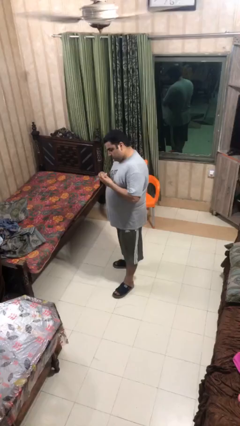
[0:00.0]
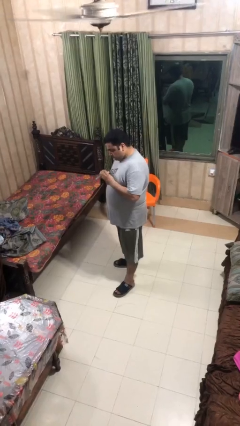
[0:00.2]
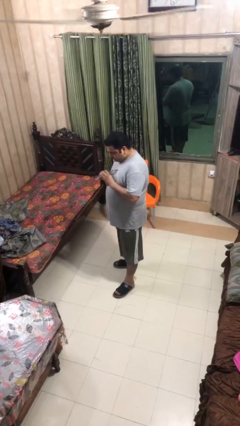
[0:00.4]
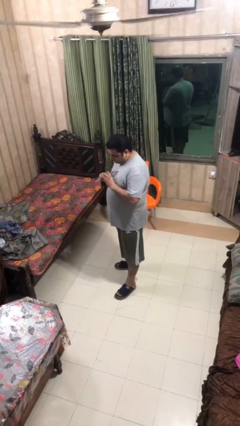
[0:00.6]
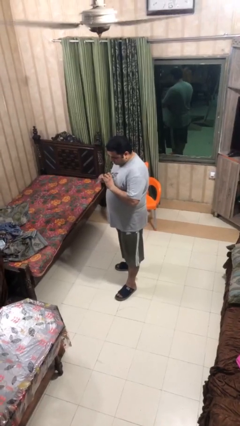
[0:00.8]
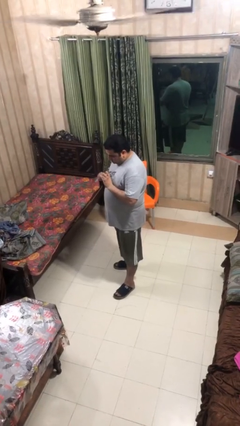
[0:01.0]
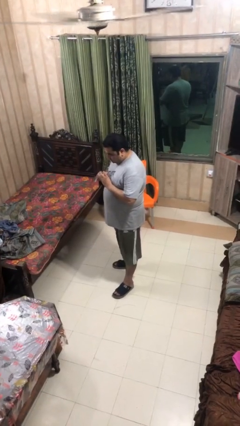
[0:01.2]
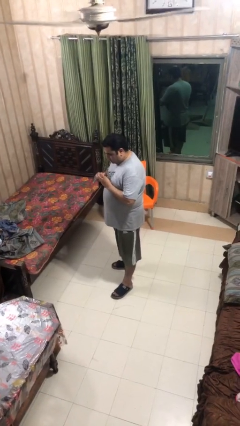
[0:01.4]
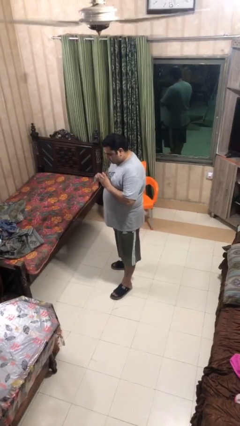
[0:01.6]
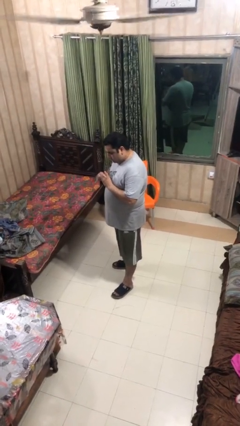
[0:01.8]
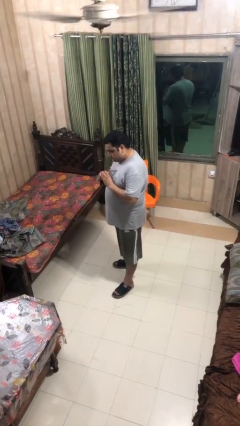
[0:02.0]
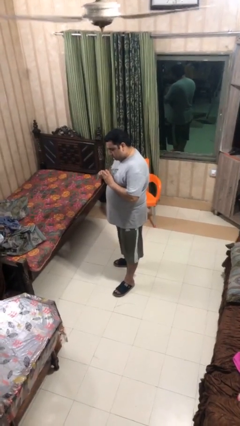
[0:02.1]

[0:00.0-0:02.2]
person files fingernails

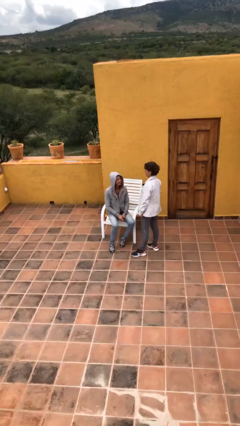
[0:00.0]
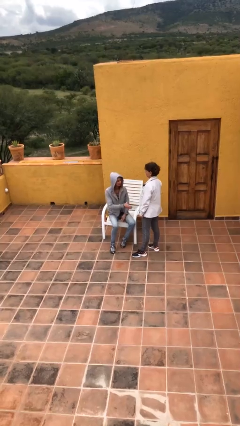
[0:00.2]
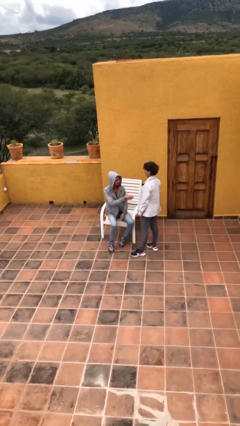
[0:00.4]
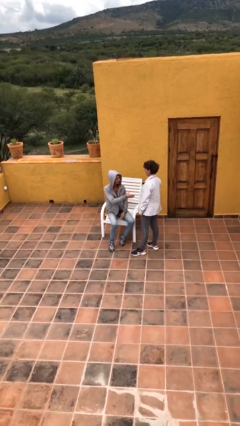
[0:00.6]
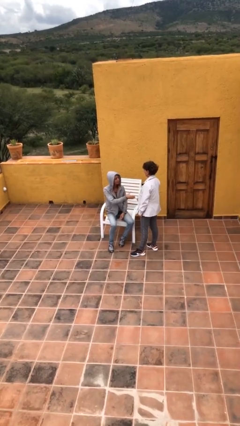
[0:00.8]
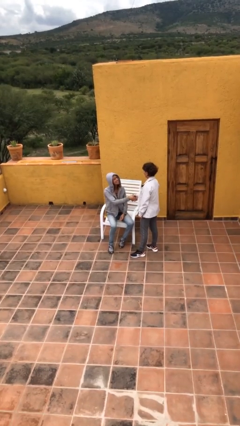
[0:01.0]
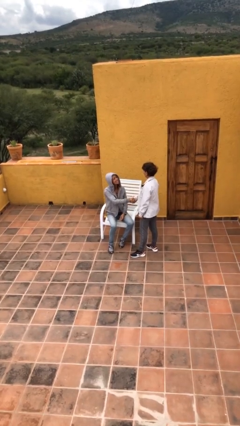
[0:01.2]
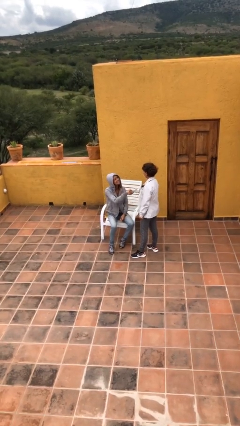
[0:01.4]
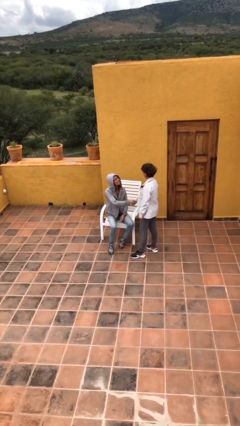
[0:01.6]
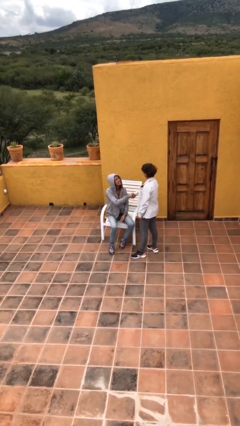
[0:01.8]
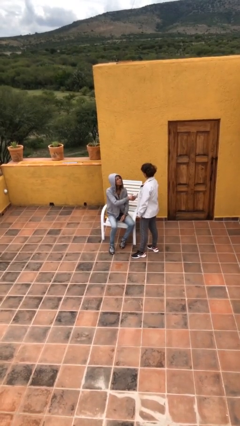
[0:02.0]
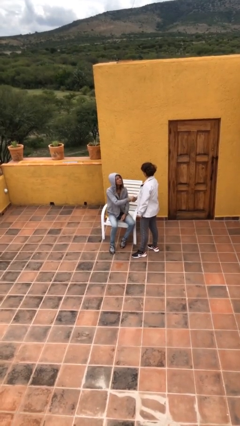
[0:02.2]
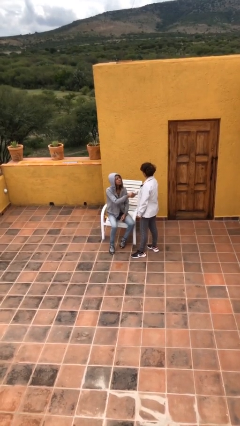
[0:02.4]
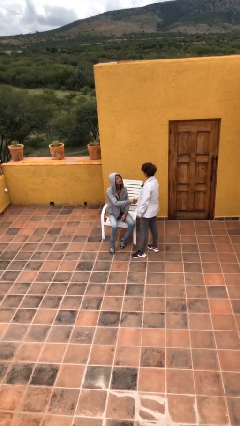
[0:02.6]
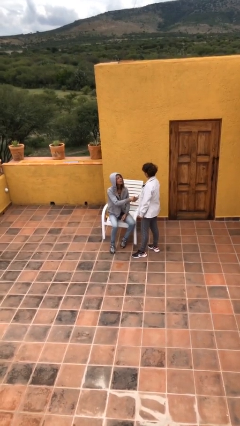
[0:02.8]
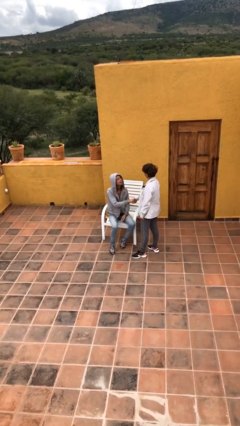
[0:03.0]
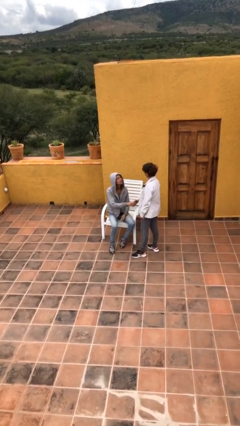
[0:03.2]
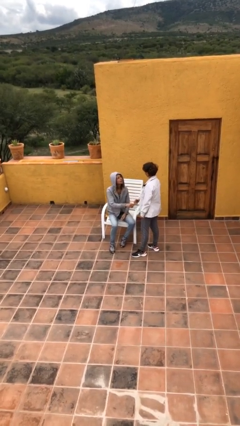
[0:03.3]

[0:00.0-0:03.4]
person shakes hand

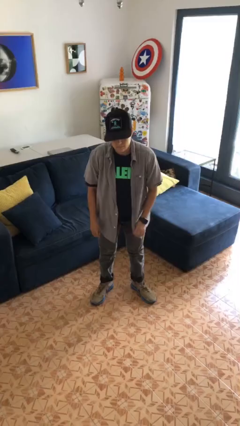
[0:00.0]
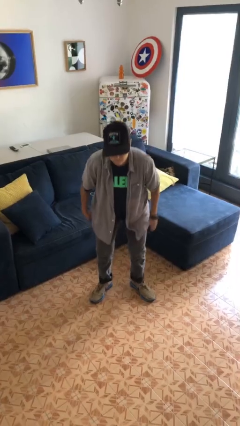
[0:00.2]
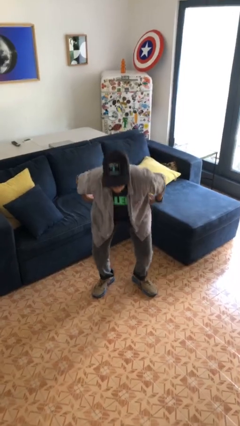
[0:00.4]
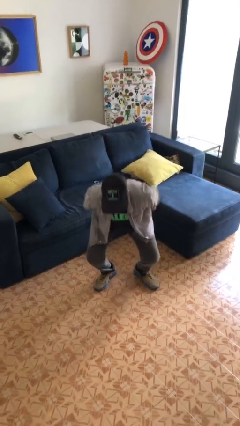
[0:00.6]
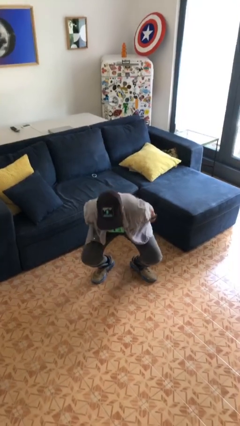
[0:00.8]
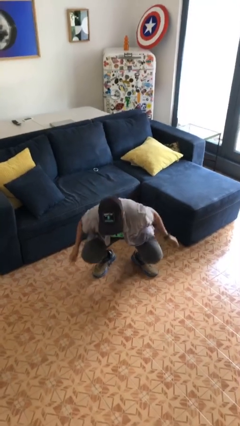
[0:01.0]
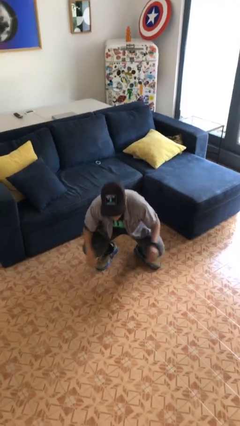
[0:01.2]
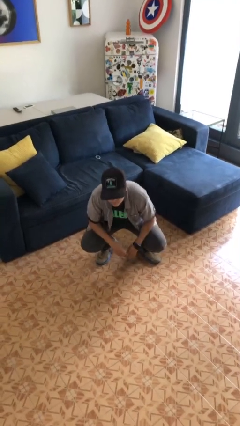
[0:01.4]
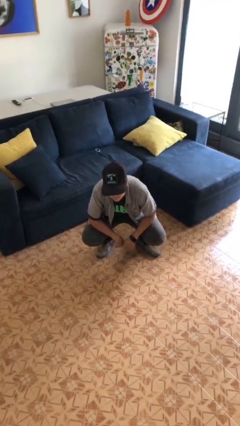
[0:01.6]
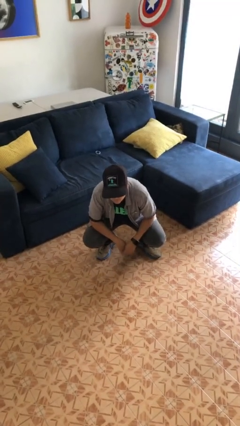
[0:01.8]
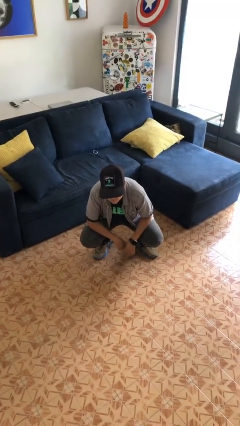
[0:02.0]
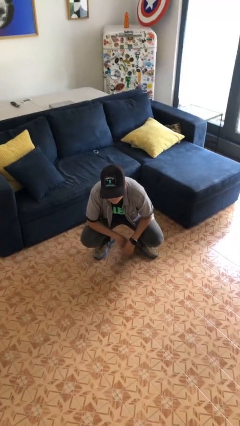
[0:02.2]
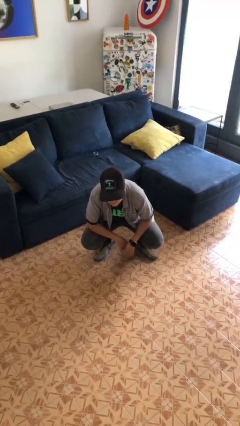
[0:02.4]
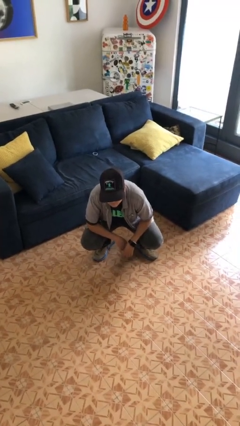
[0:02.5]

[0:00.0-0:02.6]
person squats

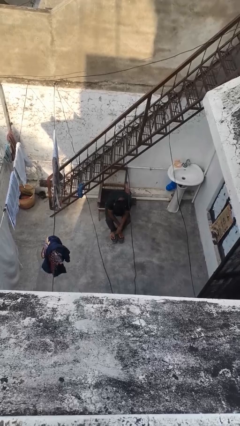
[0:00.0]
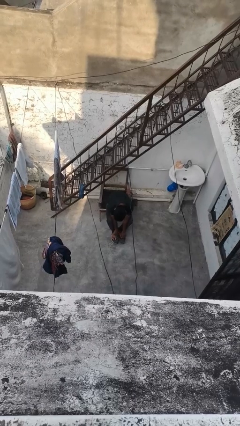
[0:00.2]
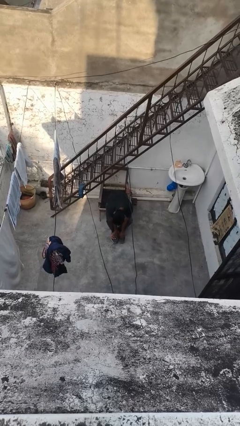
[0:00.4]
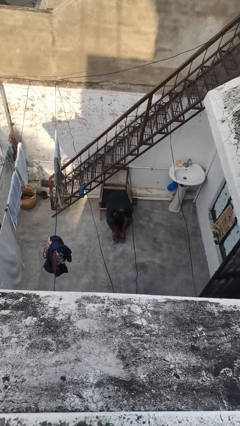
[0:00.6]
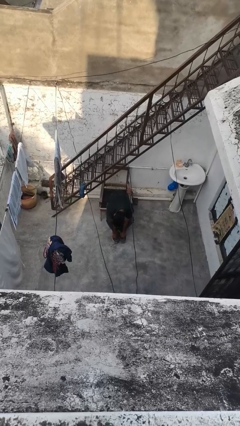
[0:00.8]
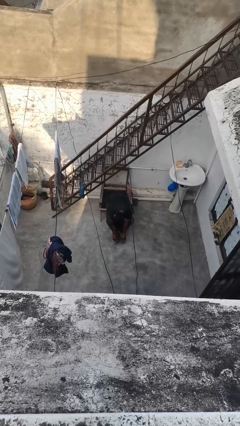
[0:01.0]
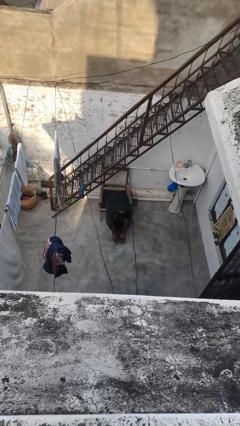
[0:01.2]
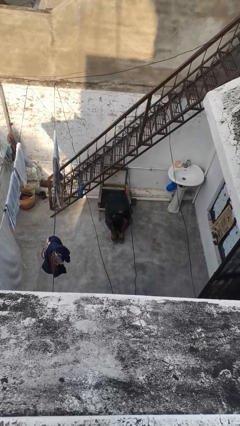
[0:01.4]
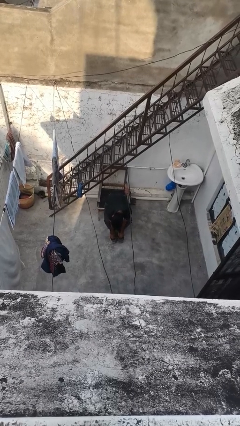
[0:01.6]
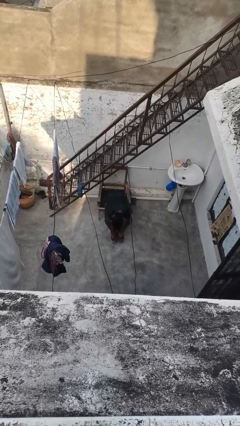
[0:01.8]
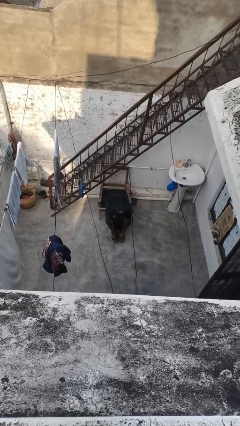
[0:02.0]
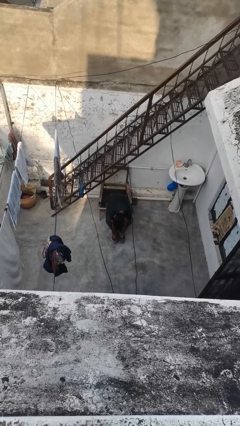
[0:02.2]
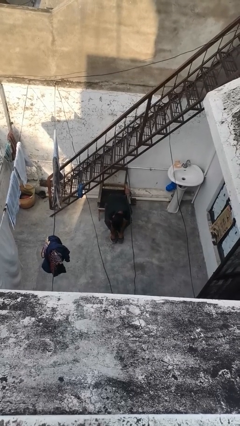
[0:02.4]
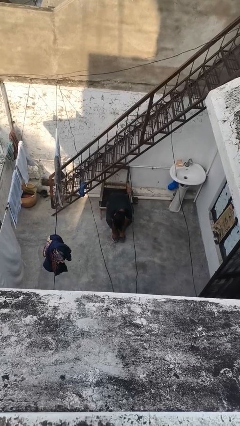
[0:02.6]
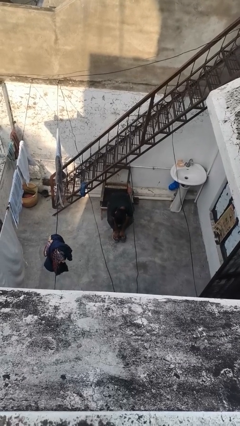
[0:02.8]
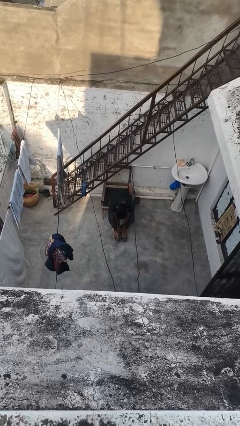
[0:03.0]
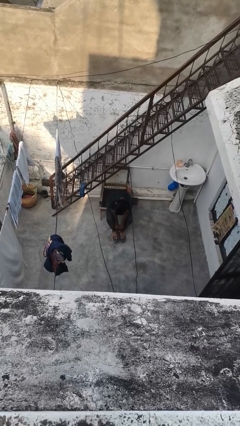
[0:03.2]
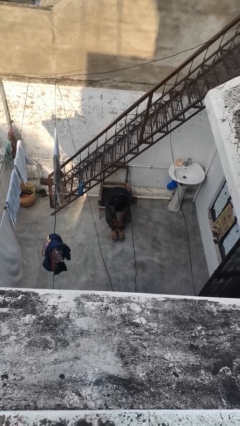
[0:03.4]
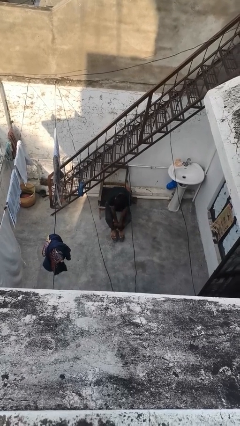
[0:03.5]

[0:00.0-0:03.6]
person rubs foot

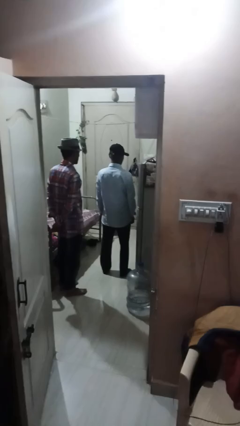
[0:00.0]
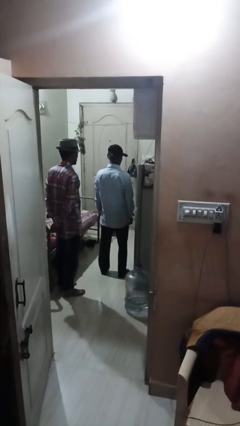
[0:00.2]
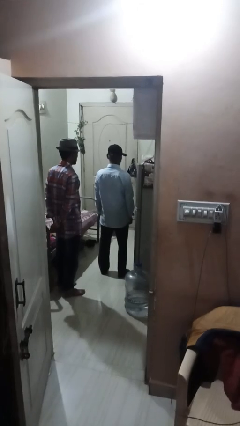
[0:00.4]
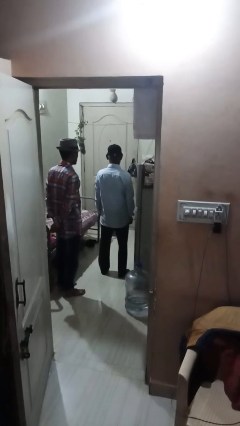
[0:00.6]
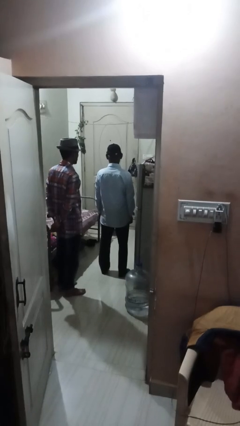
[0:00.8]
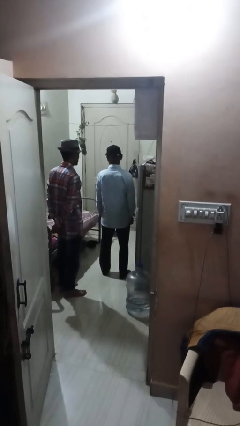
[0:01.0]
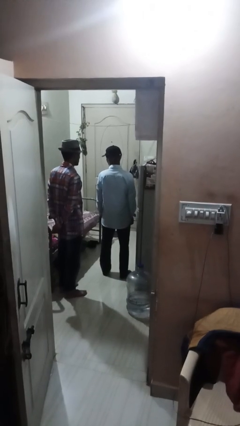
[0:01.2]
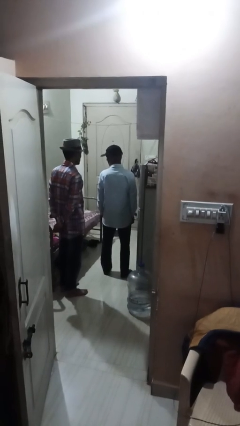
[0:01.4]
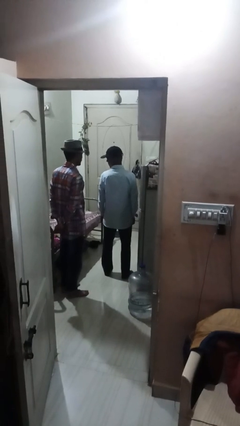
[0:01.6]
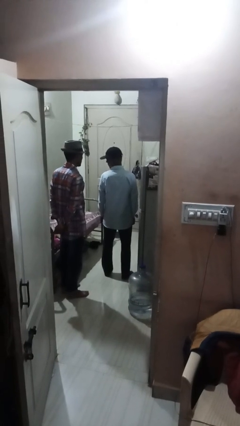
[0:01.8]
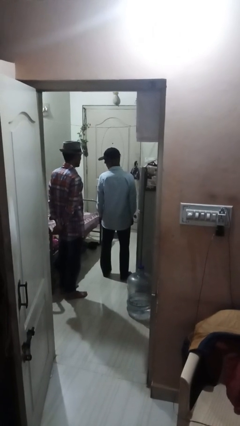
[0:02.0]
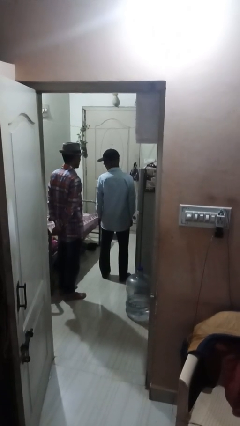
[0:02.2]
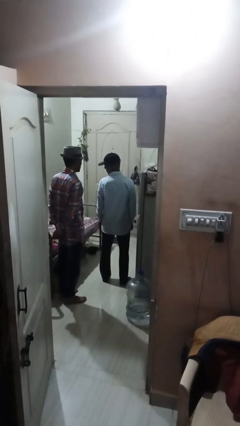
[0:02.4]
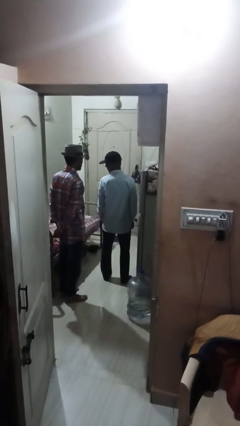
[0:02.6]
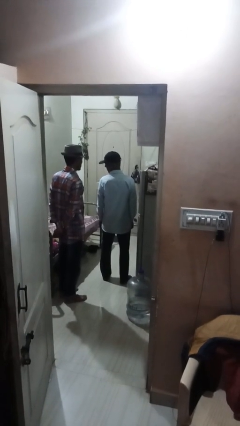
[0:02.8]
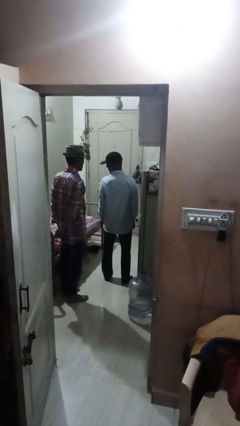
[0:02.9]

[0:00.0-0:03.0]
person looks over shoulder

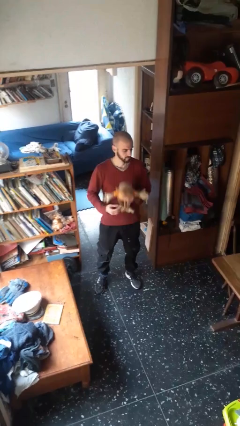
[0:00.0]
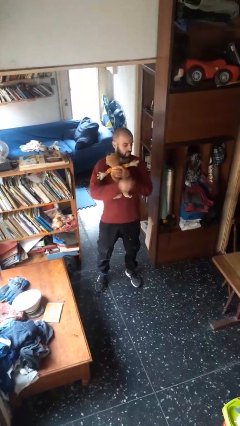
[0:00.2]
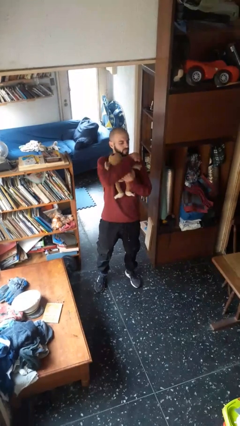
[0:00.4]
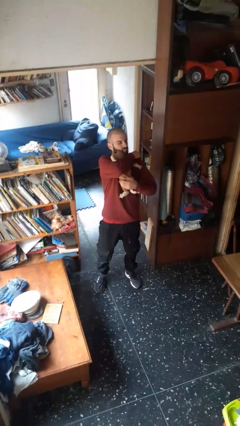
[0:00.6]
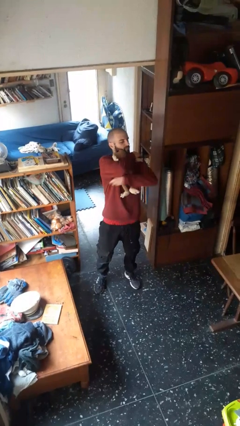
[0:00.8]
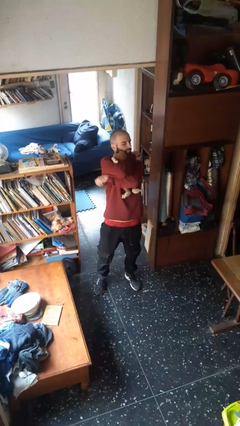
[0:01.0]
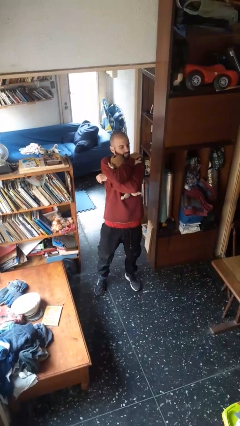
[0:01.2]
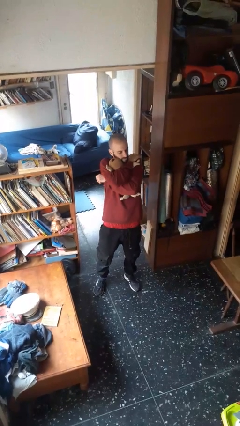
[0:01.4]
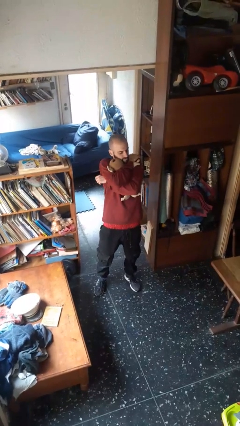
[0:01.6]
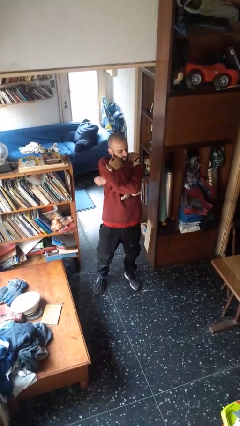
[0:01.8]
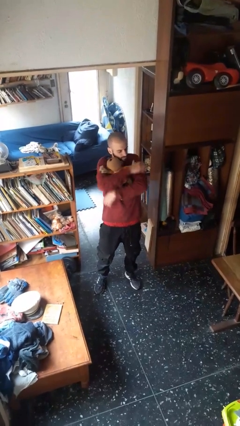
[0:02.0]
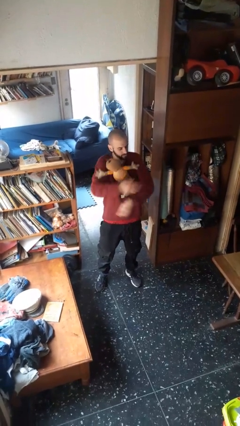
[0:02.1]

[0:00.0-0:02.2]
person hugs stuffed animal

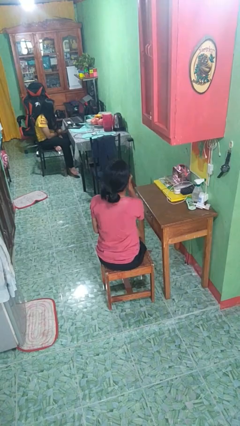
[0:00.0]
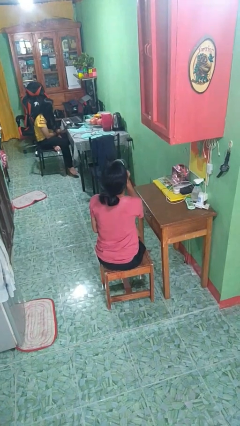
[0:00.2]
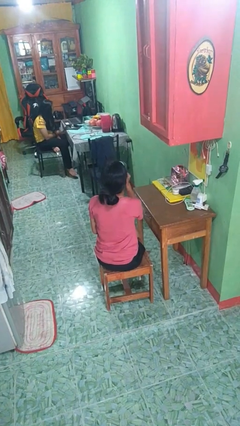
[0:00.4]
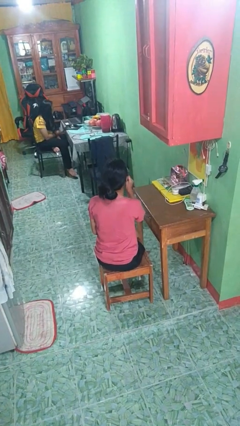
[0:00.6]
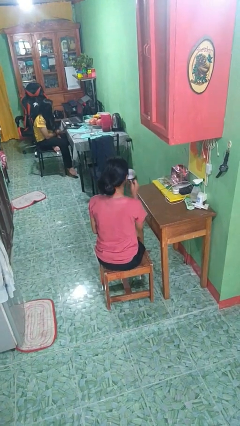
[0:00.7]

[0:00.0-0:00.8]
person drinks from mug
